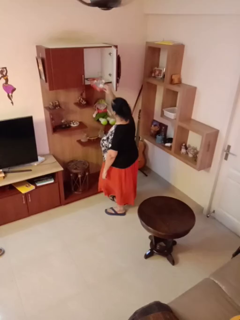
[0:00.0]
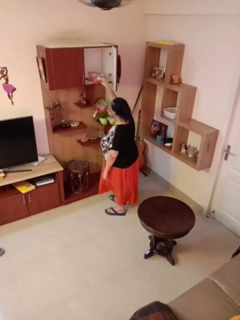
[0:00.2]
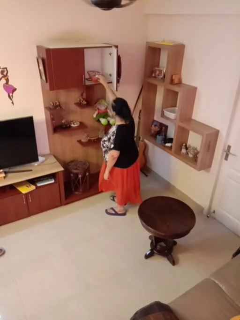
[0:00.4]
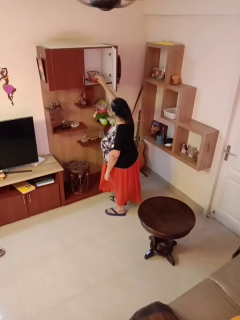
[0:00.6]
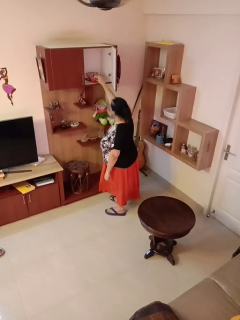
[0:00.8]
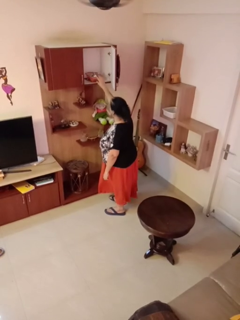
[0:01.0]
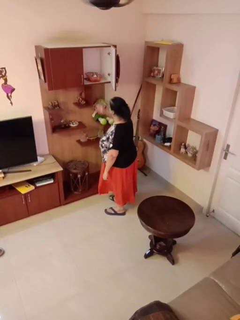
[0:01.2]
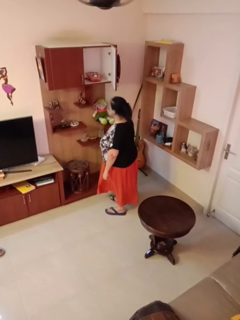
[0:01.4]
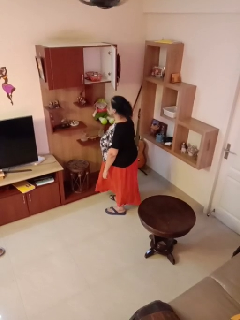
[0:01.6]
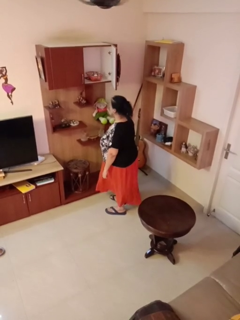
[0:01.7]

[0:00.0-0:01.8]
person puts down object into cabinet

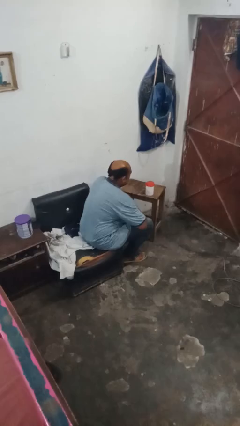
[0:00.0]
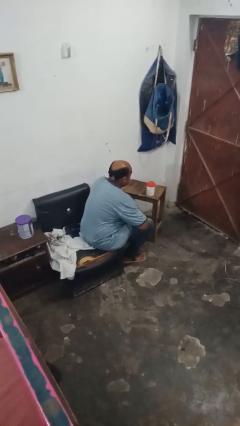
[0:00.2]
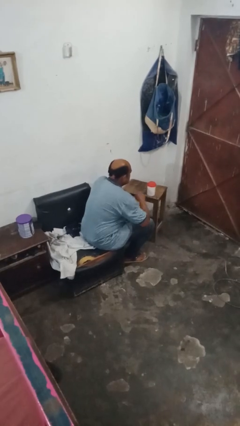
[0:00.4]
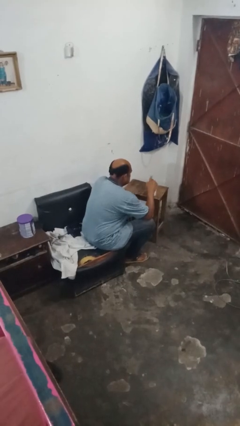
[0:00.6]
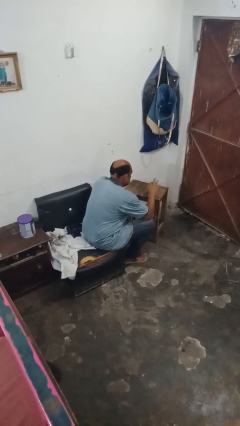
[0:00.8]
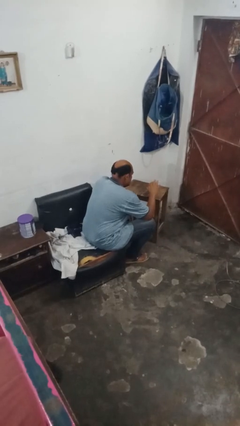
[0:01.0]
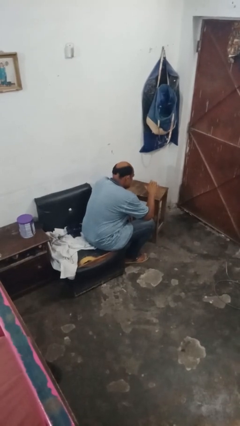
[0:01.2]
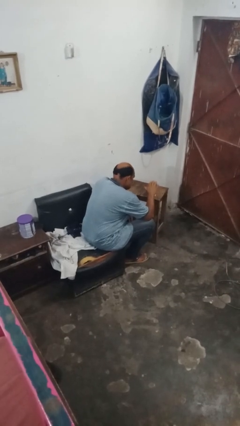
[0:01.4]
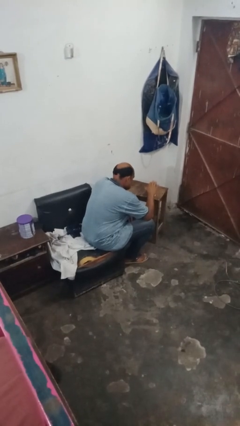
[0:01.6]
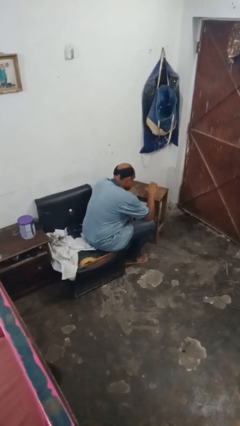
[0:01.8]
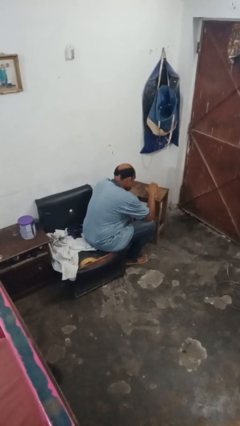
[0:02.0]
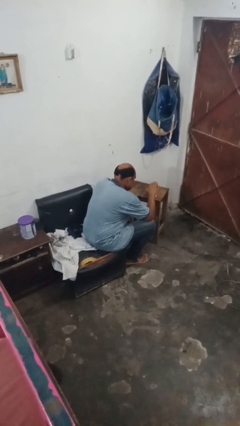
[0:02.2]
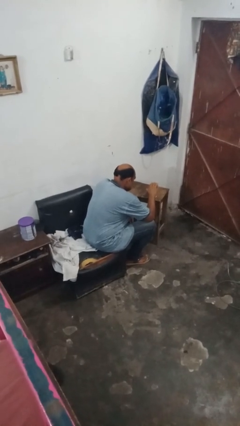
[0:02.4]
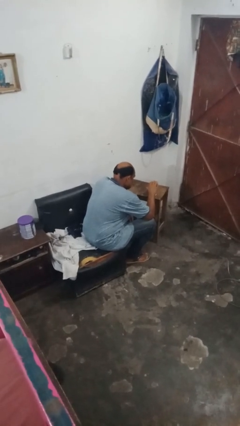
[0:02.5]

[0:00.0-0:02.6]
person taps object with finger

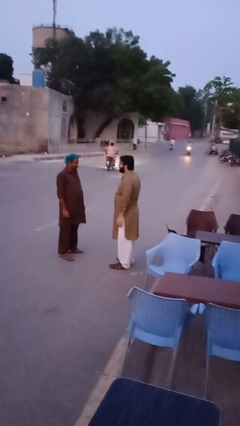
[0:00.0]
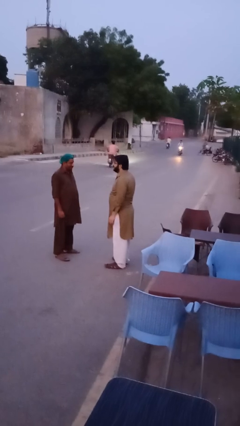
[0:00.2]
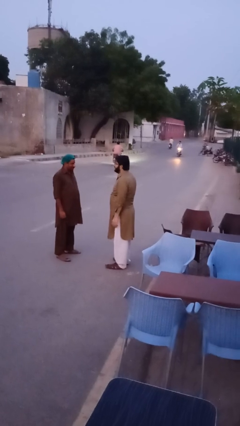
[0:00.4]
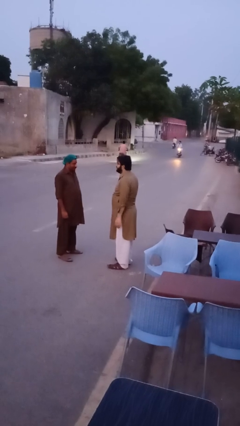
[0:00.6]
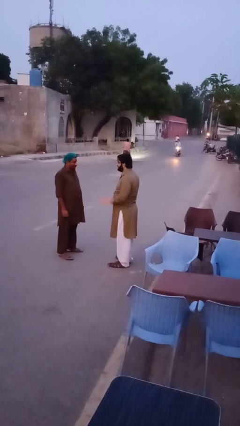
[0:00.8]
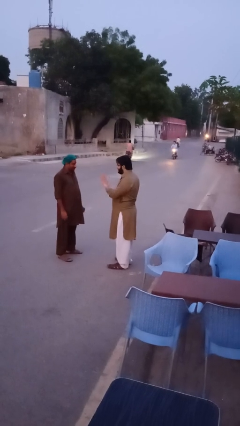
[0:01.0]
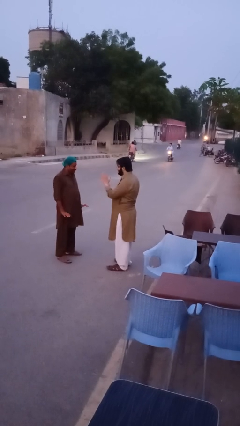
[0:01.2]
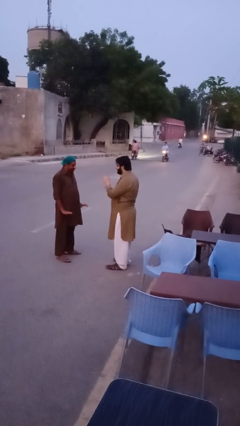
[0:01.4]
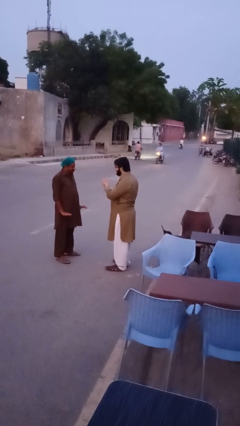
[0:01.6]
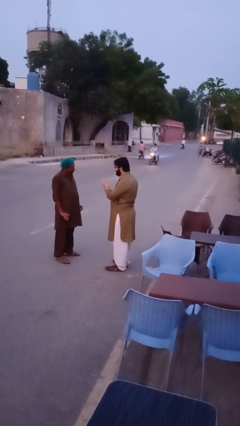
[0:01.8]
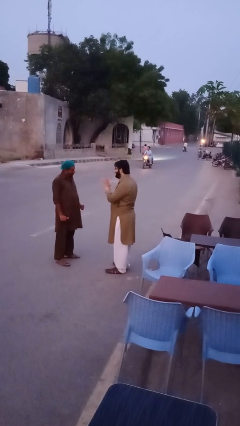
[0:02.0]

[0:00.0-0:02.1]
person talks to person

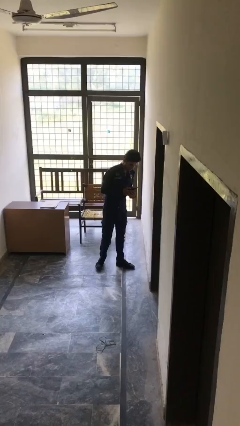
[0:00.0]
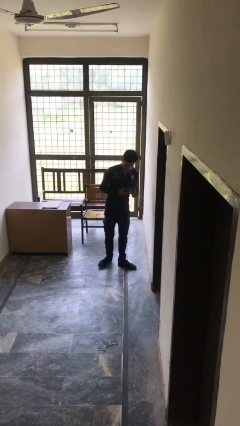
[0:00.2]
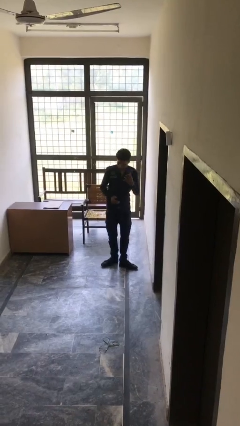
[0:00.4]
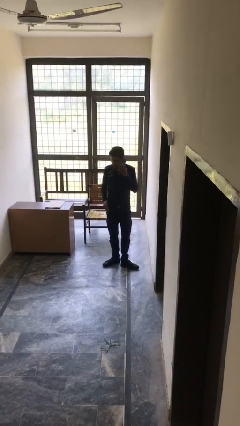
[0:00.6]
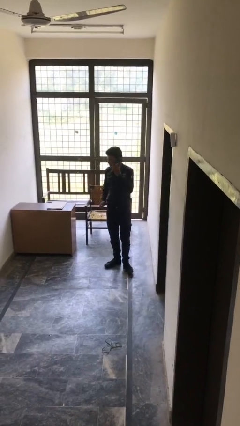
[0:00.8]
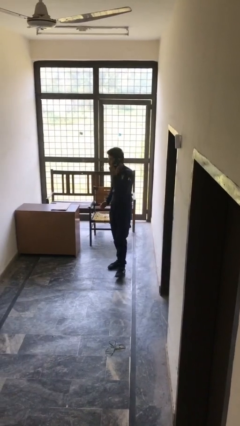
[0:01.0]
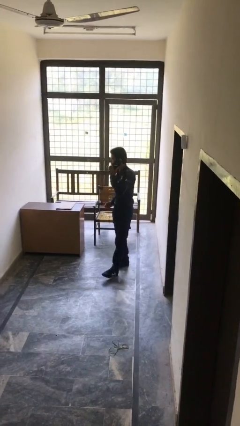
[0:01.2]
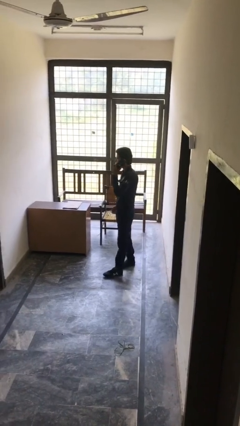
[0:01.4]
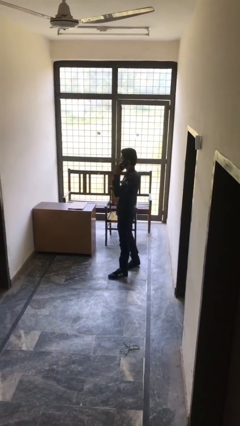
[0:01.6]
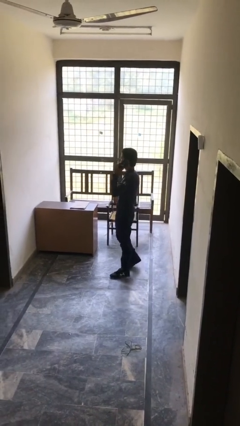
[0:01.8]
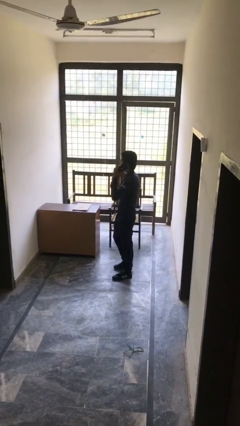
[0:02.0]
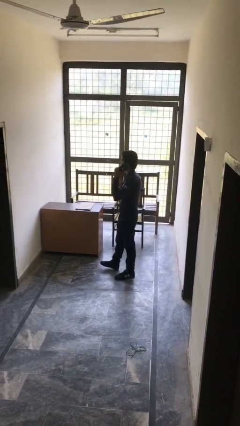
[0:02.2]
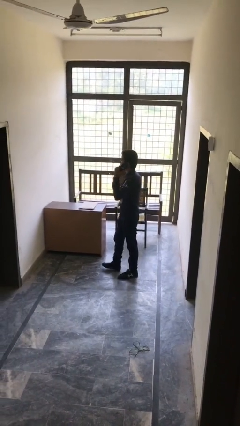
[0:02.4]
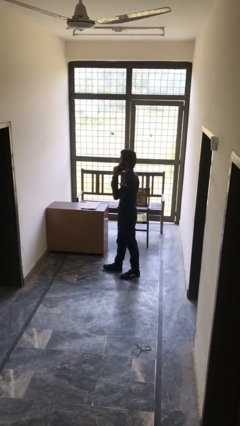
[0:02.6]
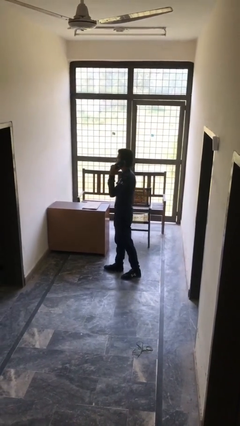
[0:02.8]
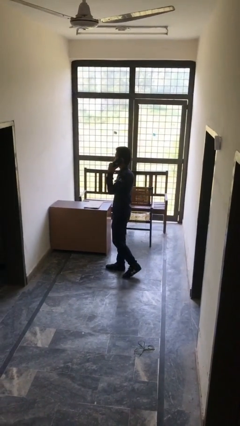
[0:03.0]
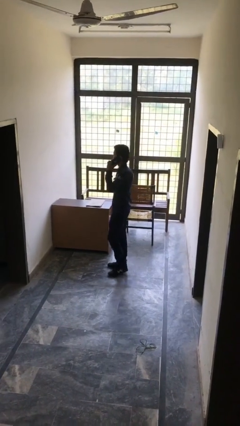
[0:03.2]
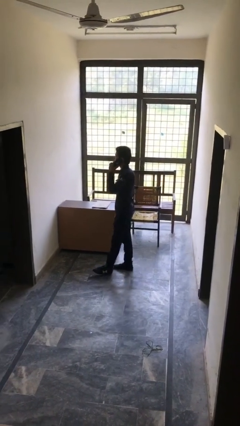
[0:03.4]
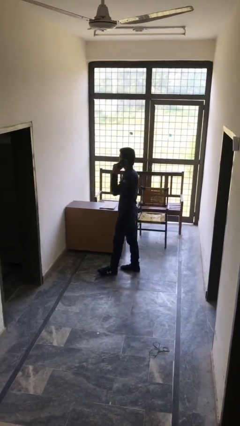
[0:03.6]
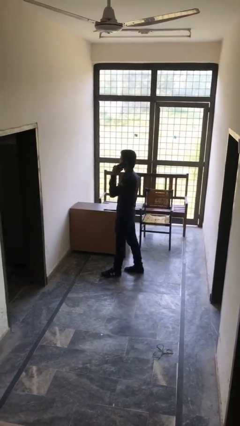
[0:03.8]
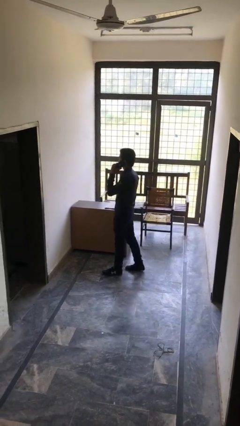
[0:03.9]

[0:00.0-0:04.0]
person talks on phone

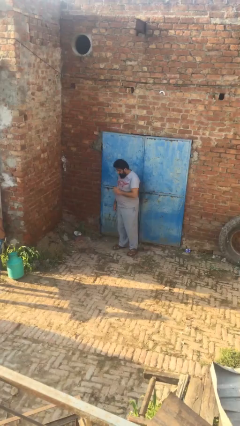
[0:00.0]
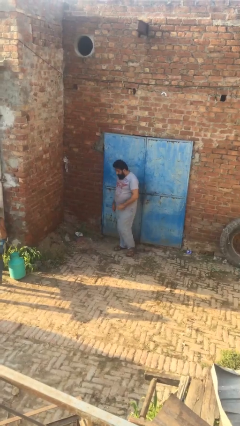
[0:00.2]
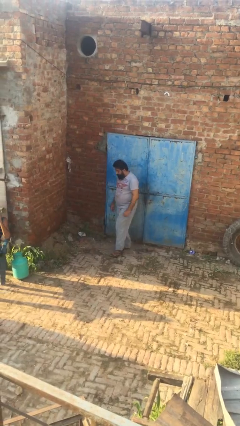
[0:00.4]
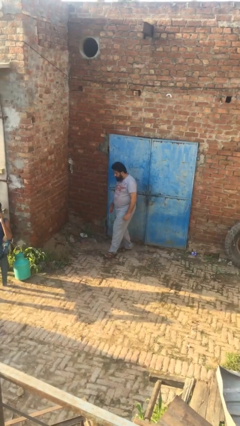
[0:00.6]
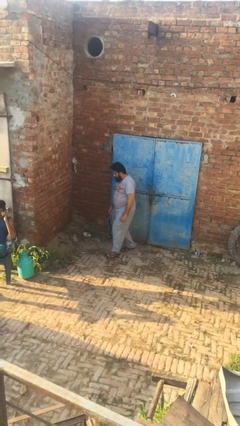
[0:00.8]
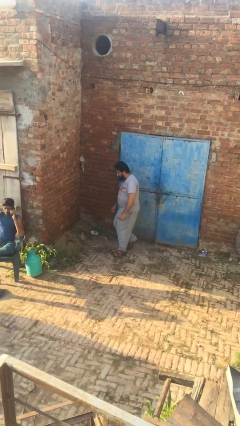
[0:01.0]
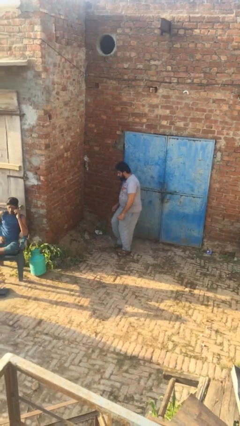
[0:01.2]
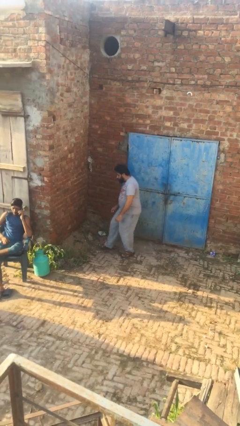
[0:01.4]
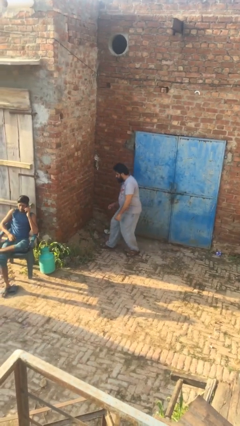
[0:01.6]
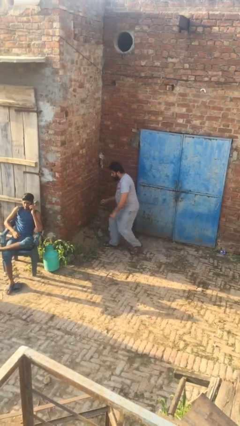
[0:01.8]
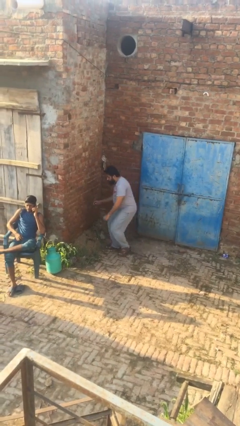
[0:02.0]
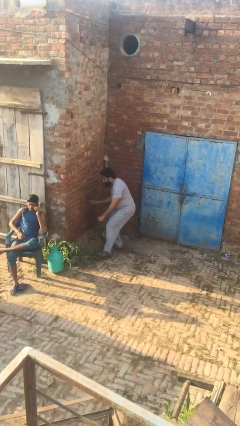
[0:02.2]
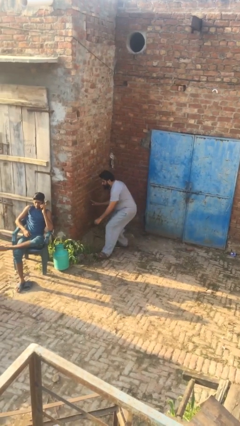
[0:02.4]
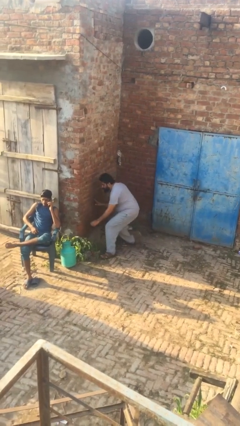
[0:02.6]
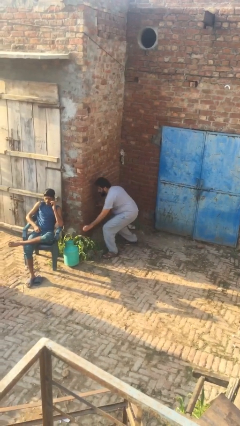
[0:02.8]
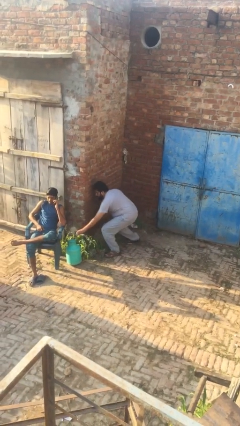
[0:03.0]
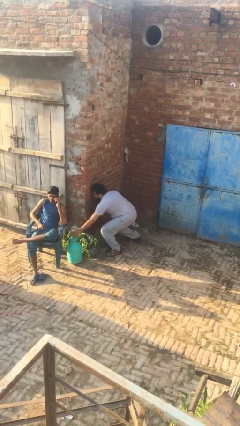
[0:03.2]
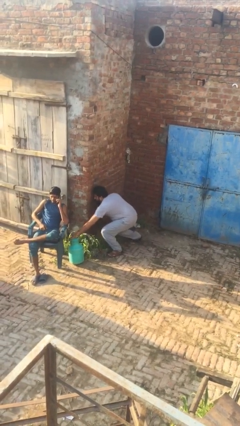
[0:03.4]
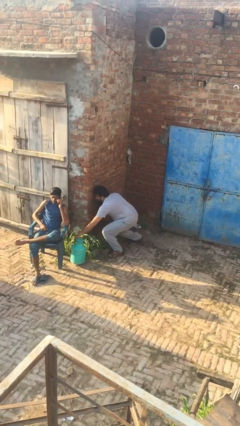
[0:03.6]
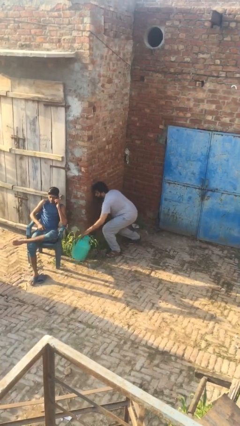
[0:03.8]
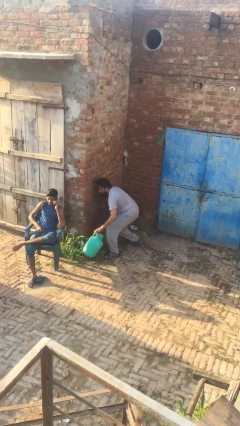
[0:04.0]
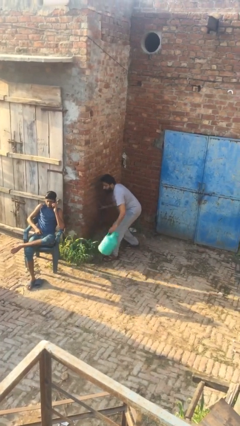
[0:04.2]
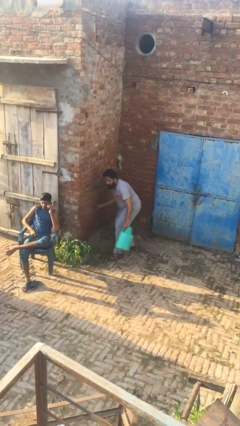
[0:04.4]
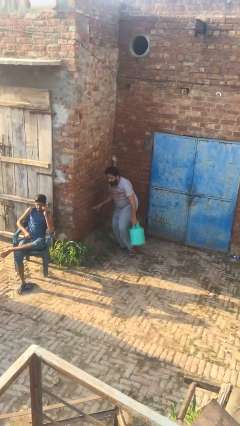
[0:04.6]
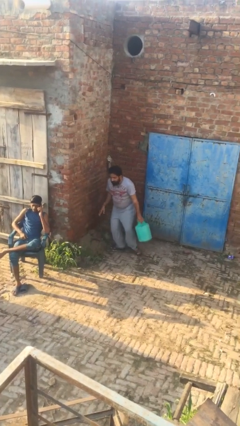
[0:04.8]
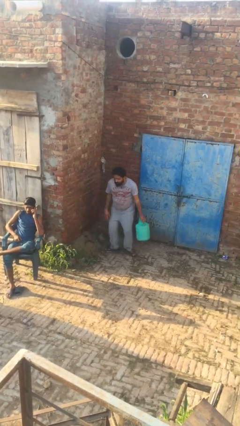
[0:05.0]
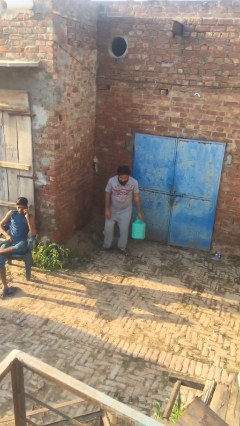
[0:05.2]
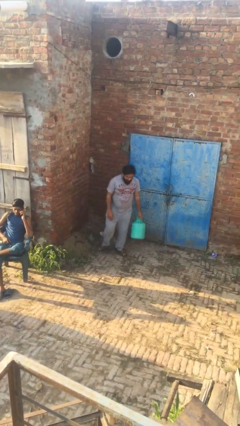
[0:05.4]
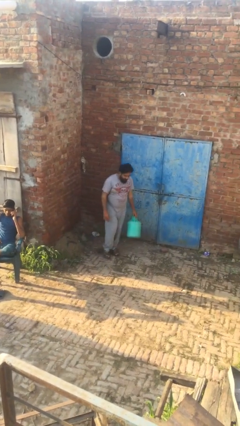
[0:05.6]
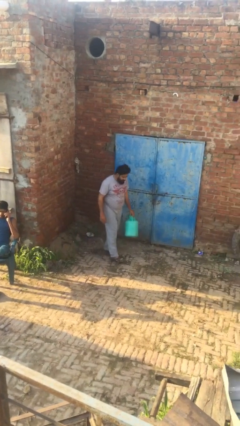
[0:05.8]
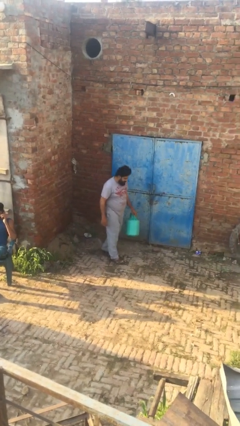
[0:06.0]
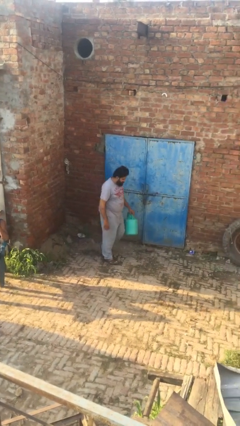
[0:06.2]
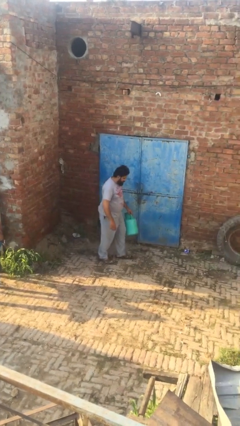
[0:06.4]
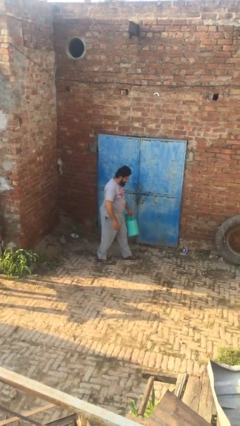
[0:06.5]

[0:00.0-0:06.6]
person steals object from person

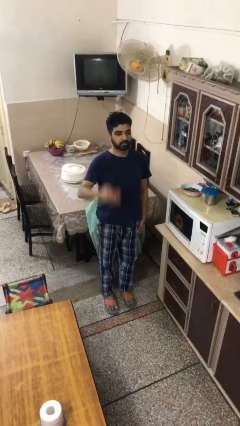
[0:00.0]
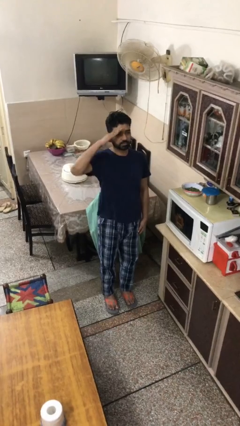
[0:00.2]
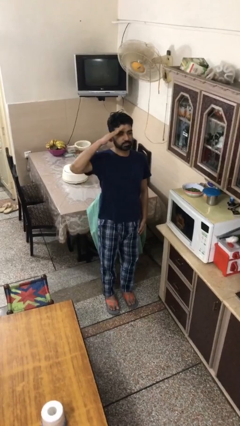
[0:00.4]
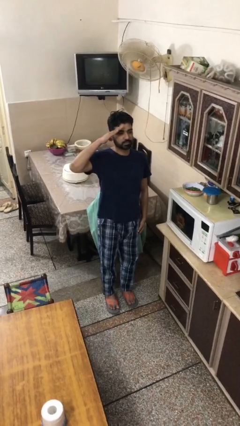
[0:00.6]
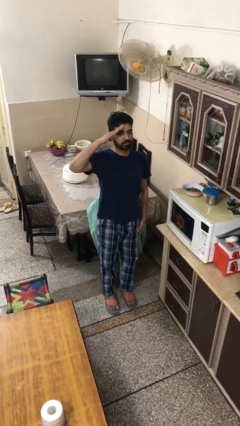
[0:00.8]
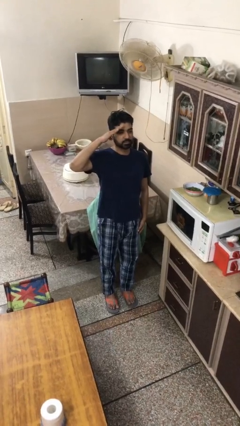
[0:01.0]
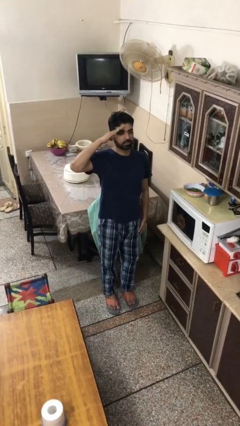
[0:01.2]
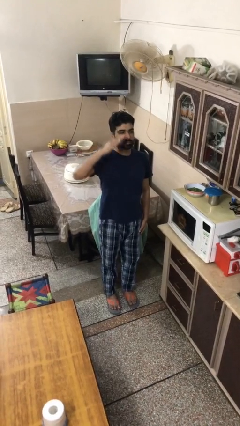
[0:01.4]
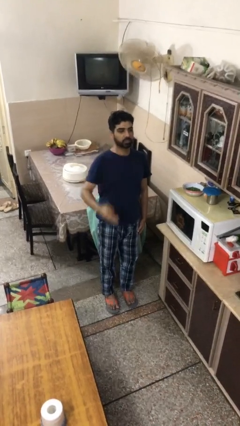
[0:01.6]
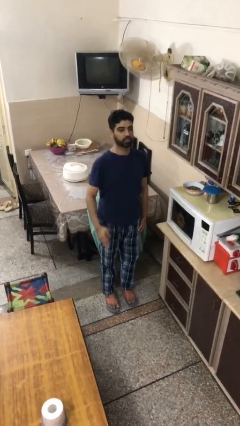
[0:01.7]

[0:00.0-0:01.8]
person salutes
